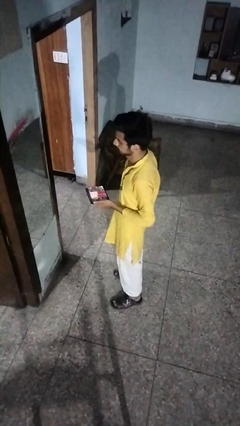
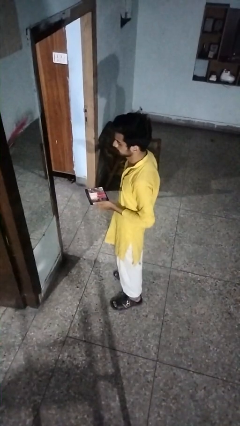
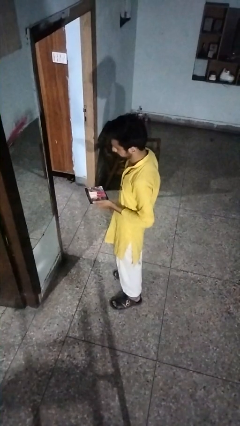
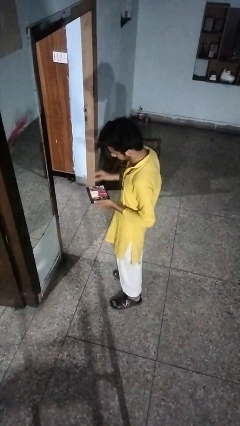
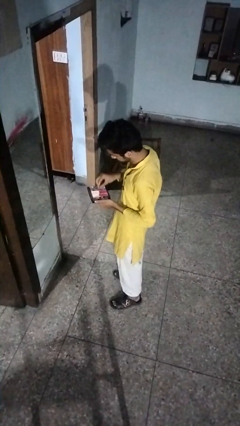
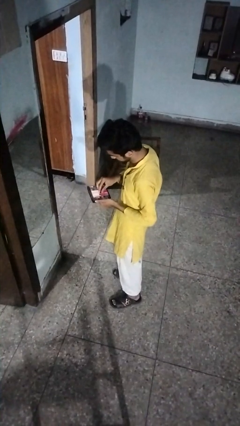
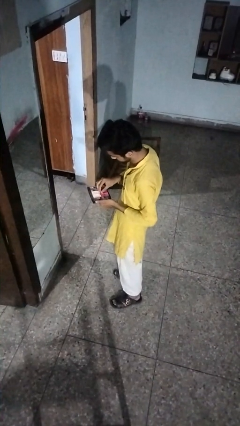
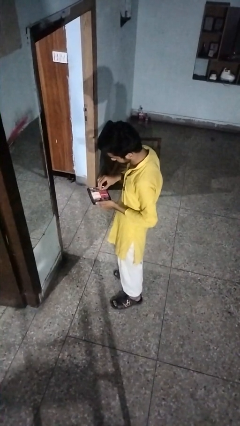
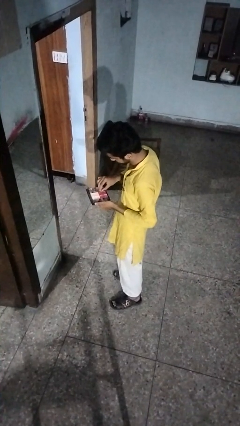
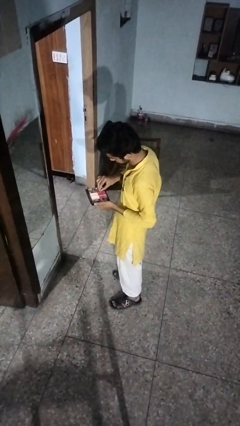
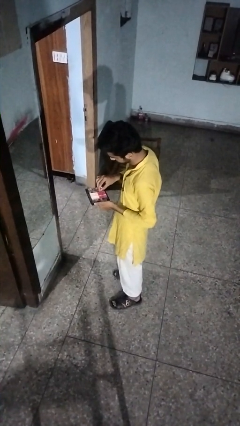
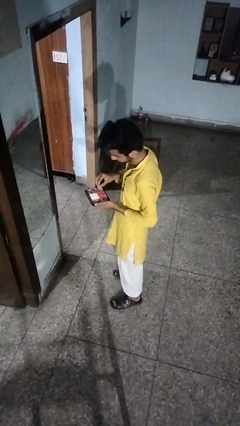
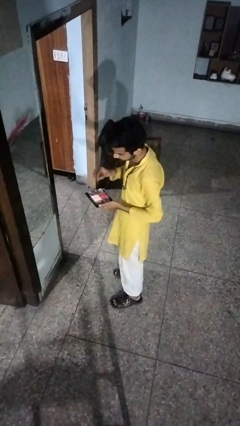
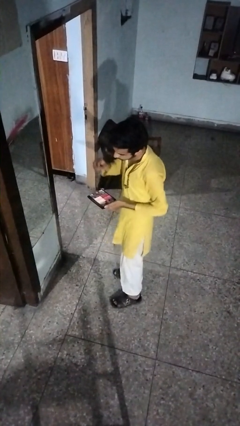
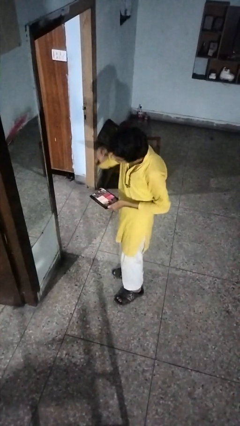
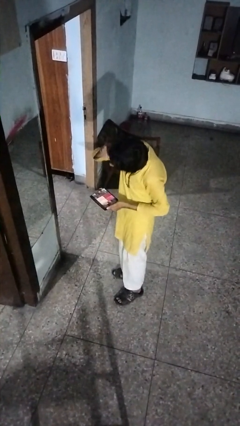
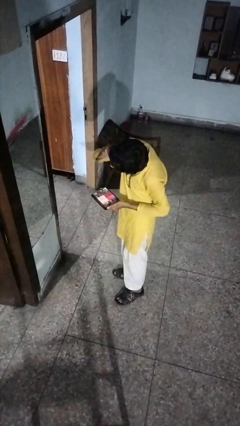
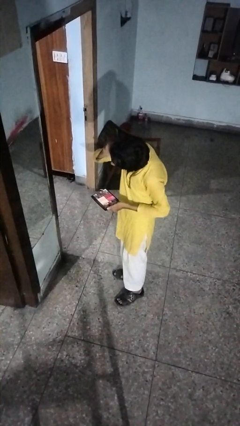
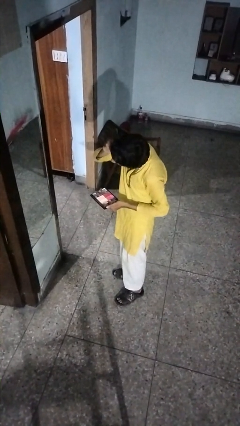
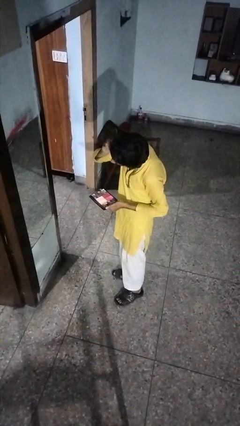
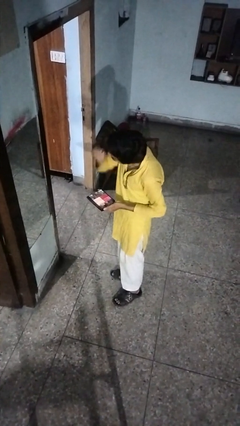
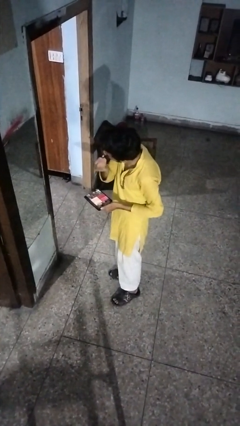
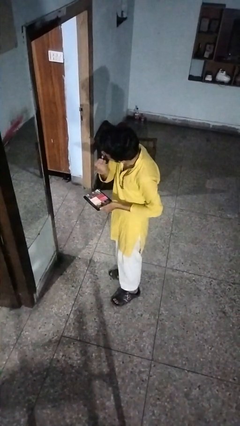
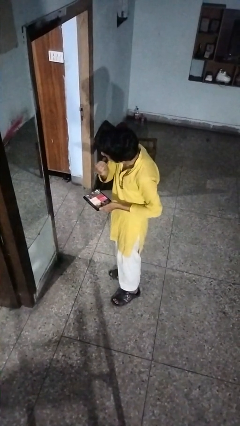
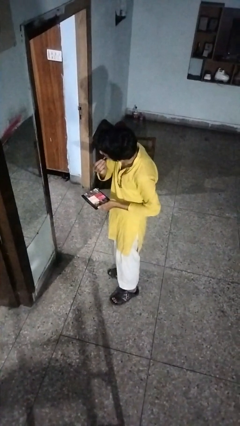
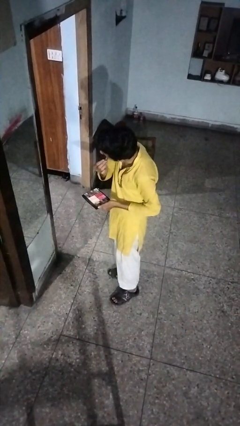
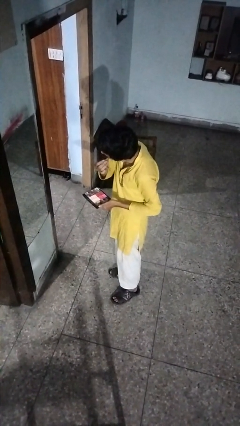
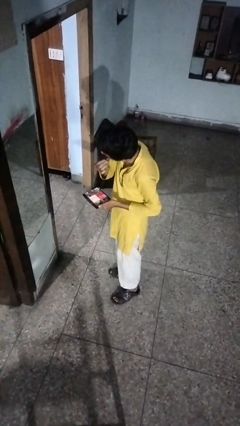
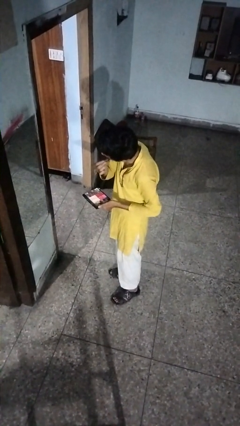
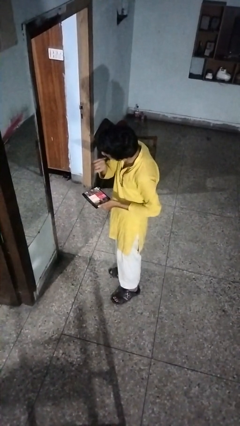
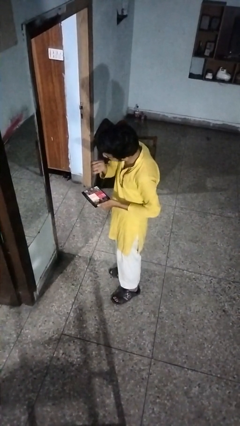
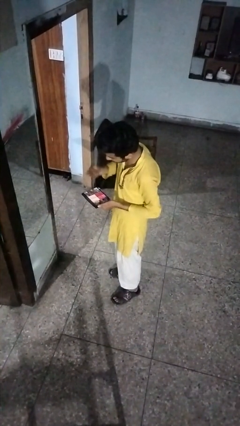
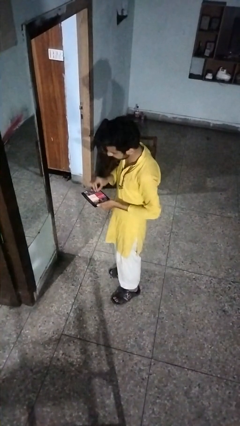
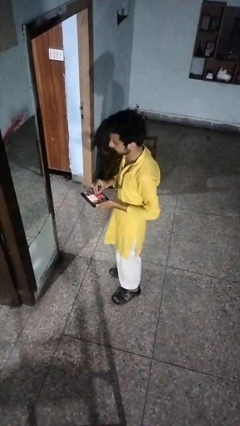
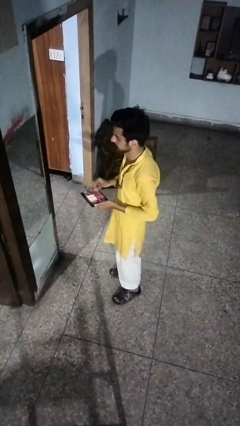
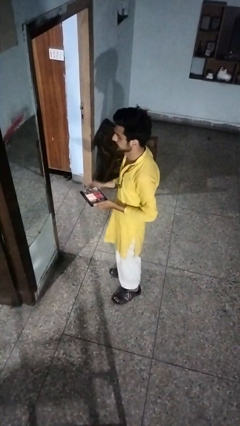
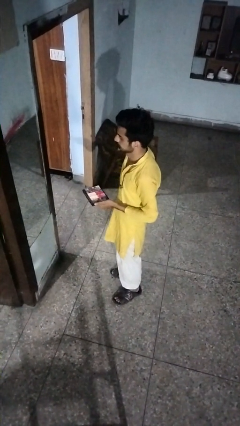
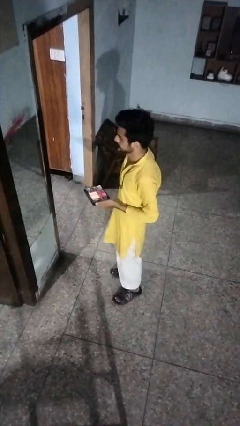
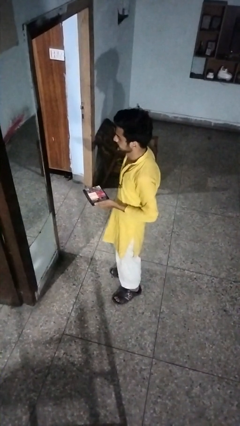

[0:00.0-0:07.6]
person applies eye makeup

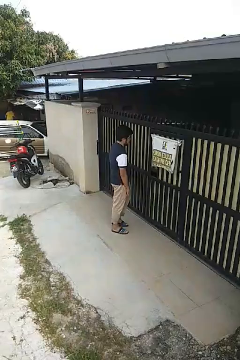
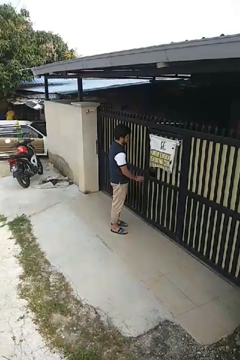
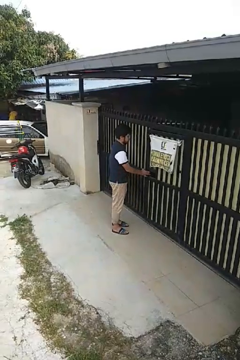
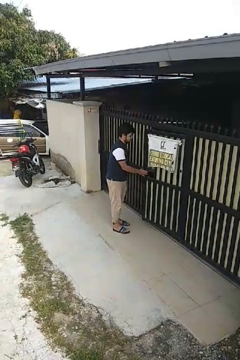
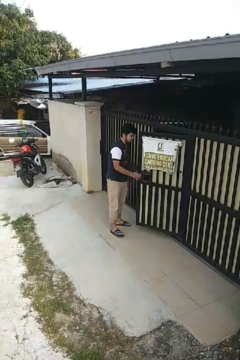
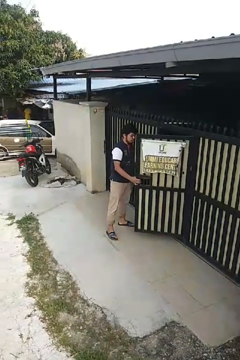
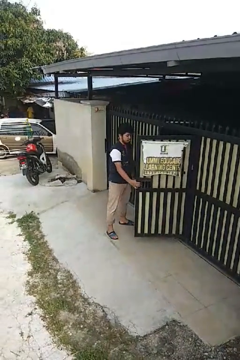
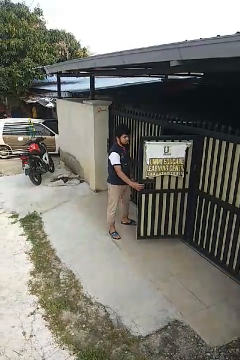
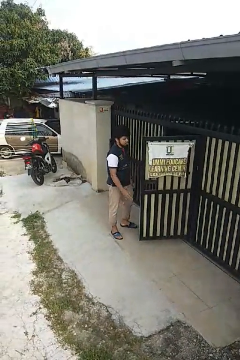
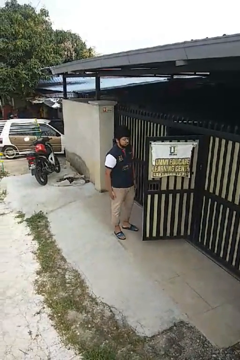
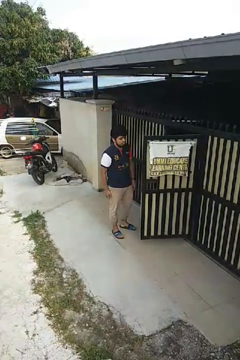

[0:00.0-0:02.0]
person opens gate

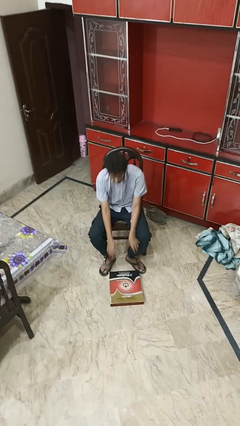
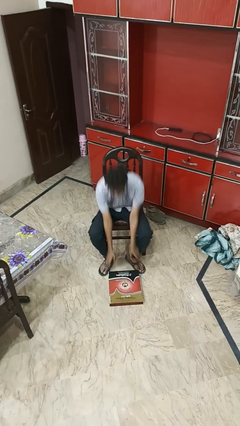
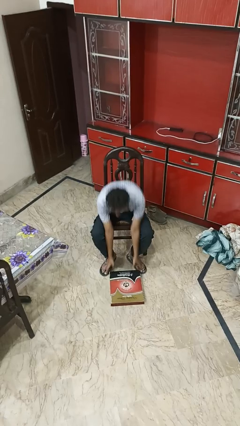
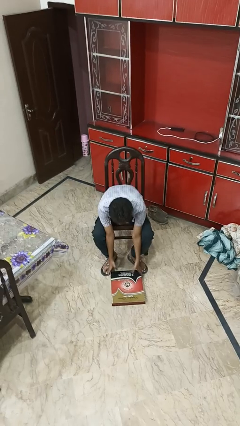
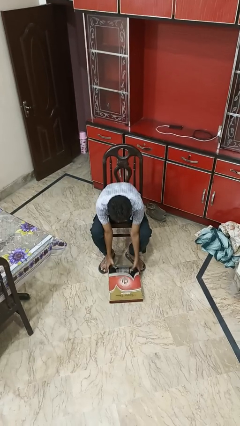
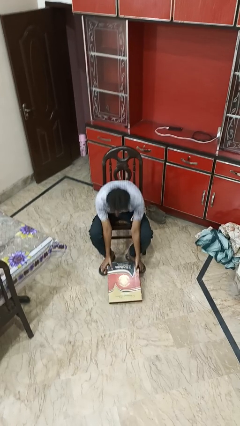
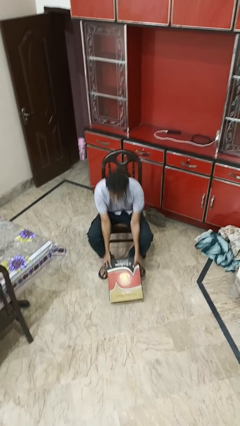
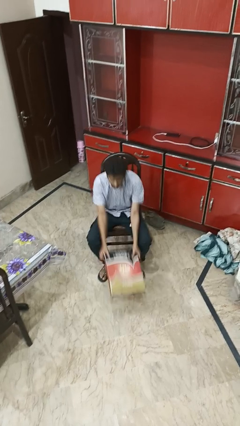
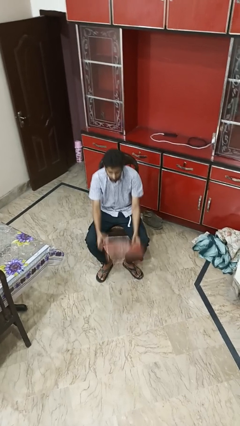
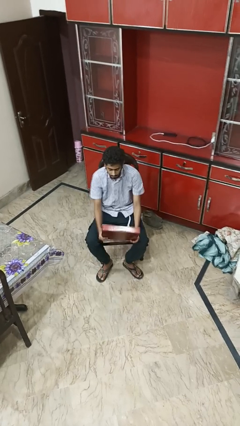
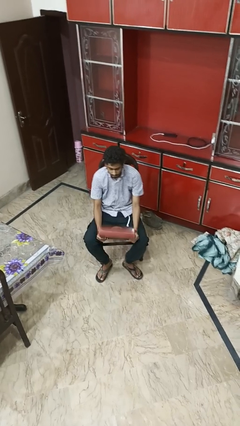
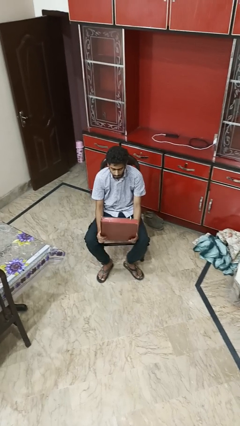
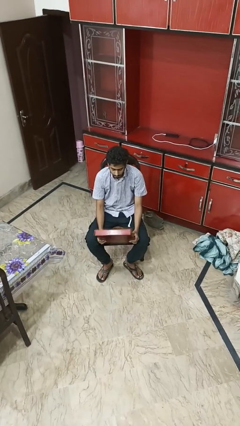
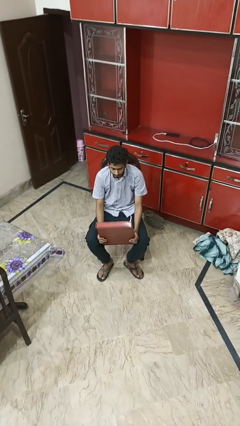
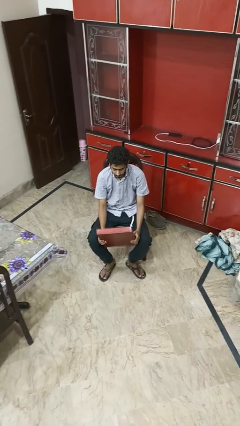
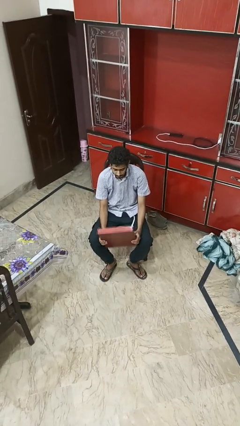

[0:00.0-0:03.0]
person picks up object from floor

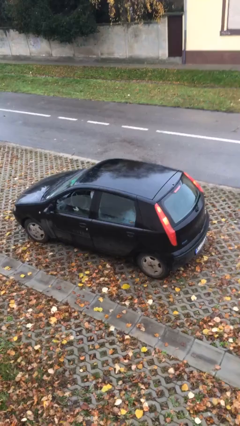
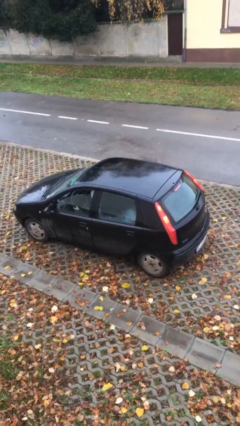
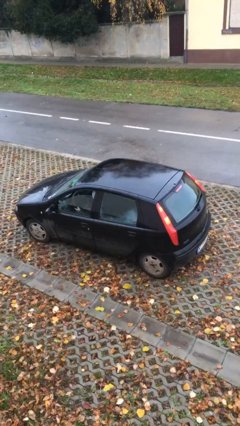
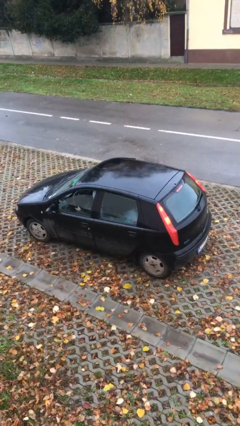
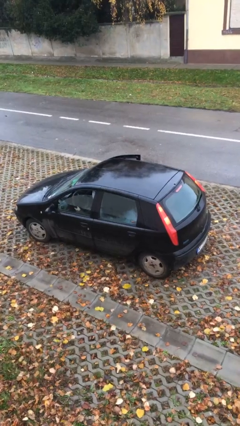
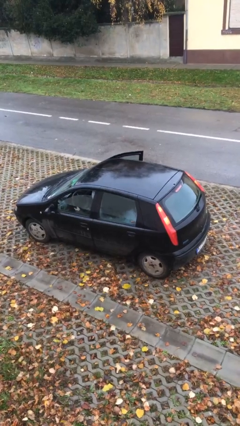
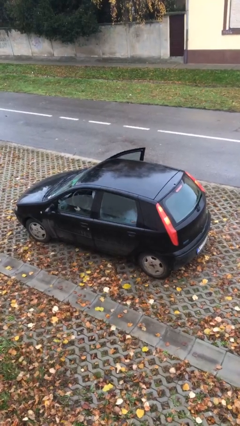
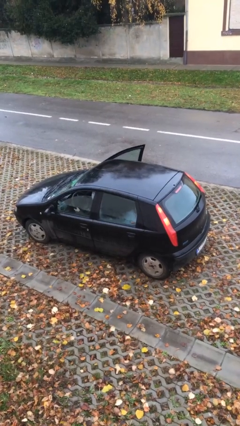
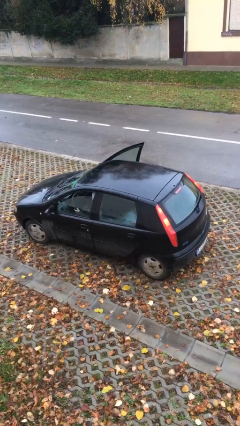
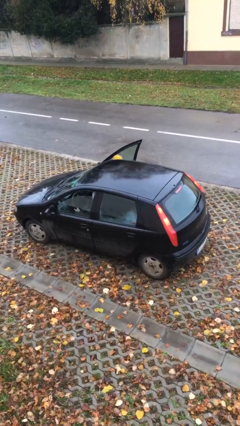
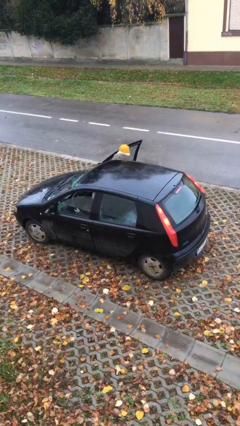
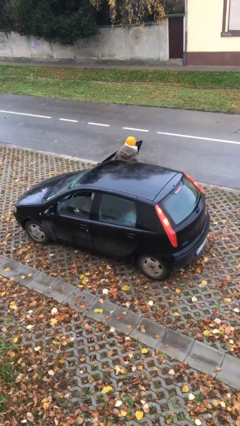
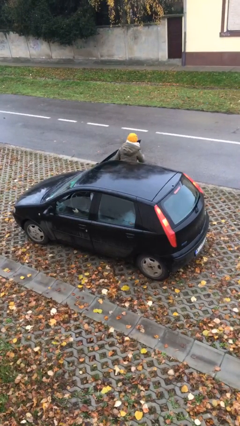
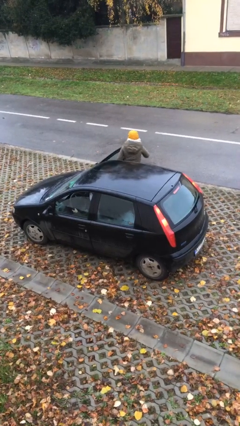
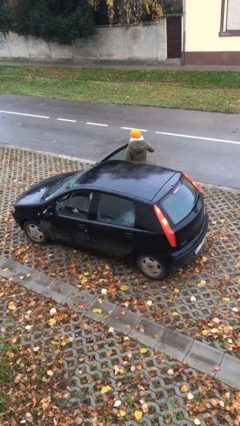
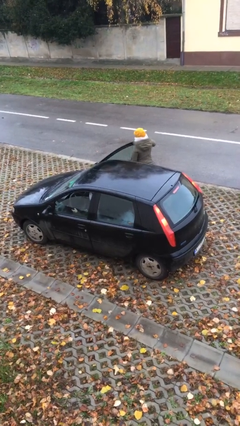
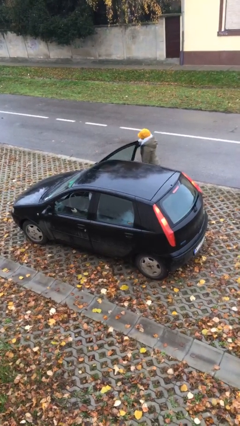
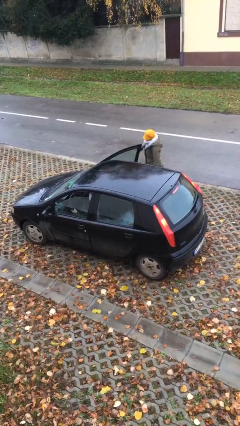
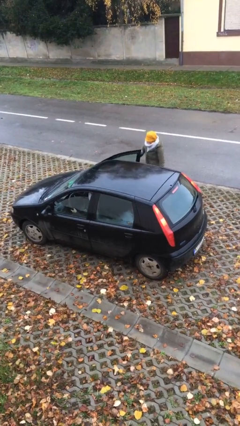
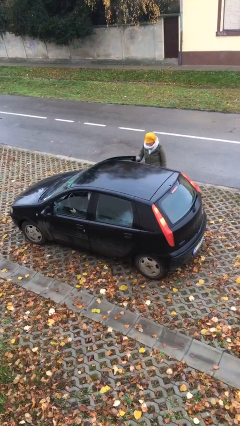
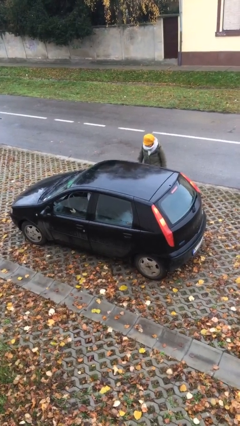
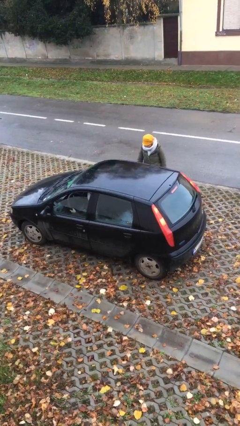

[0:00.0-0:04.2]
car drops off person

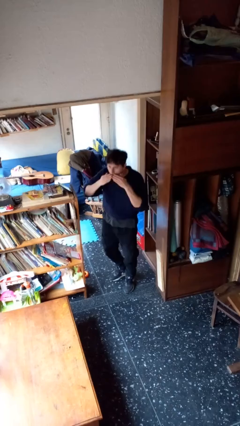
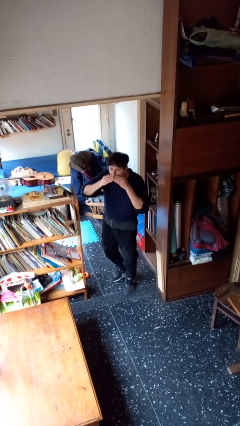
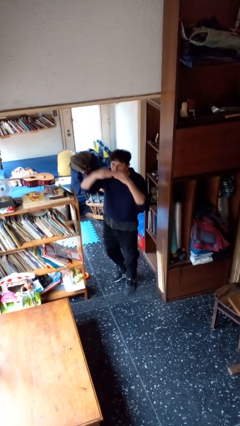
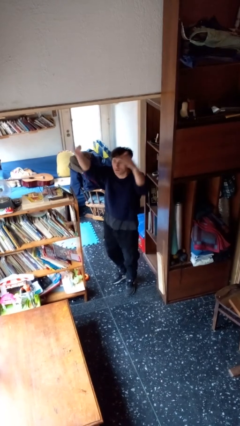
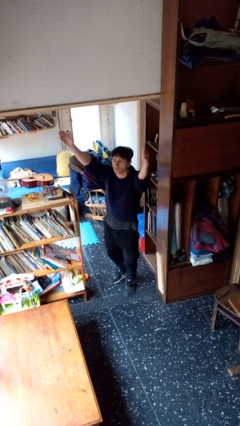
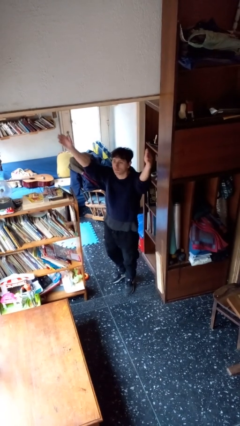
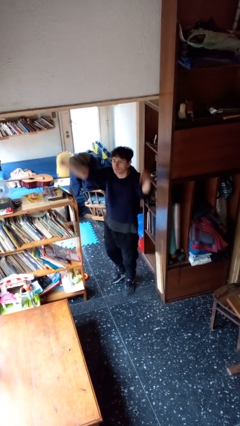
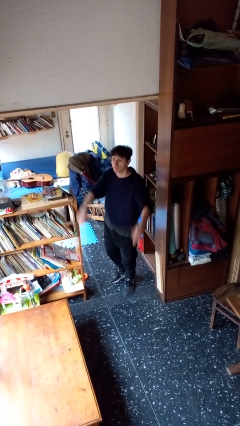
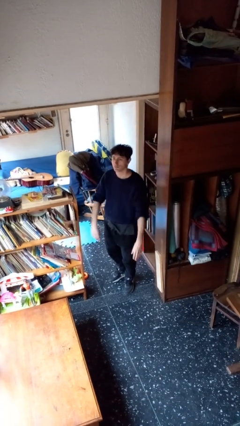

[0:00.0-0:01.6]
person gestures blow kiss
